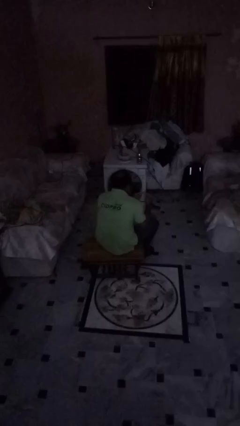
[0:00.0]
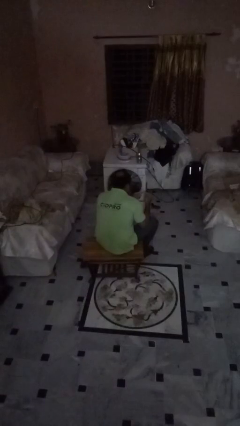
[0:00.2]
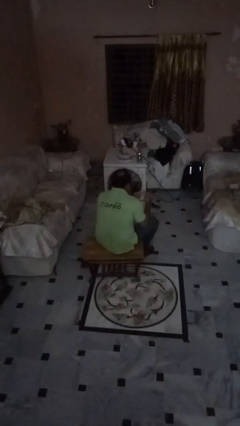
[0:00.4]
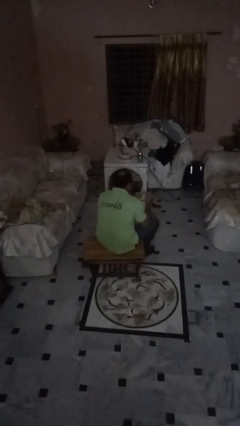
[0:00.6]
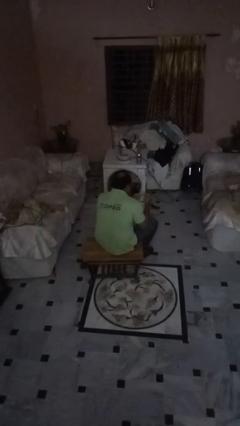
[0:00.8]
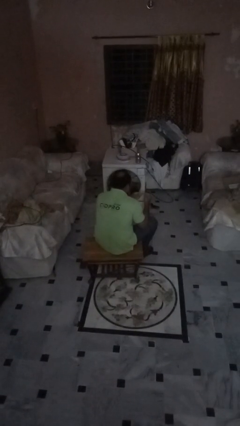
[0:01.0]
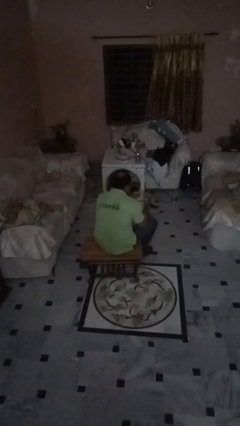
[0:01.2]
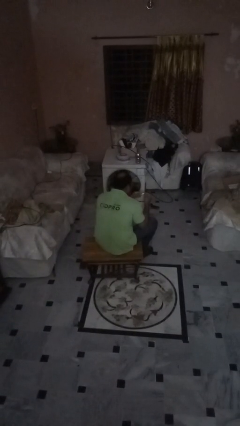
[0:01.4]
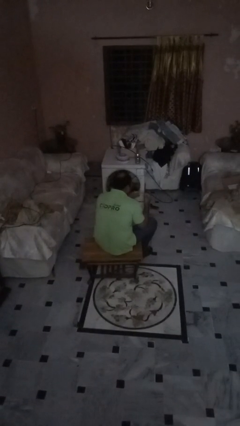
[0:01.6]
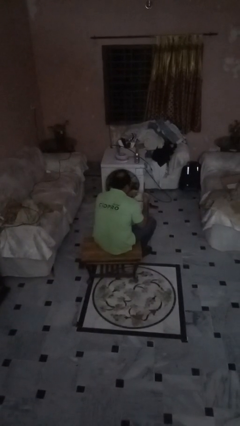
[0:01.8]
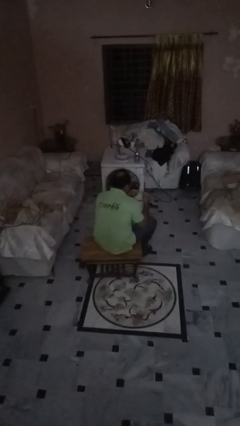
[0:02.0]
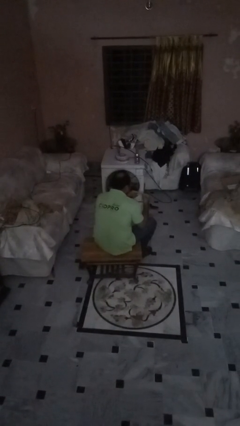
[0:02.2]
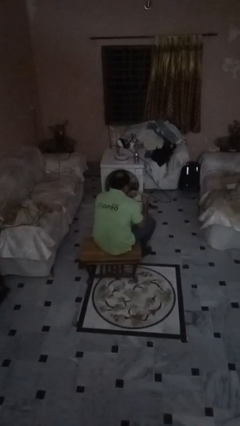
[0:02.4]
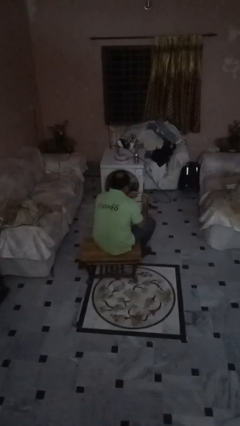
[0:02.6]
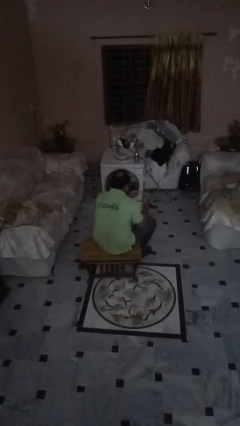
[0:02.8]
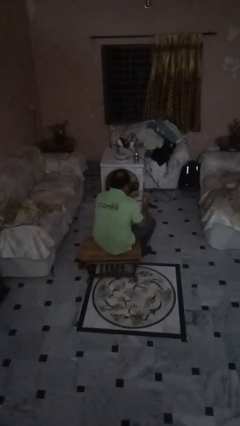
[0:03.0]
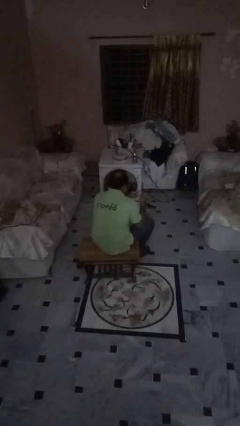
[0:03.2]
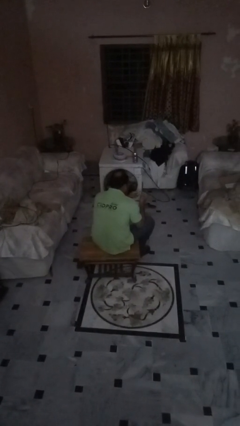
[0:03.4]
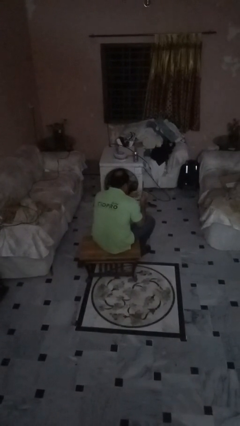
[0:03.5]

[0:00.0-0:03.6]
person files fingernails

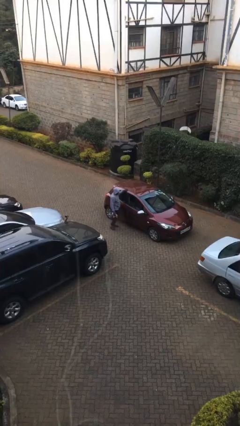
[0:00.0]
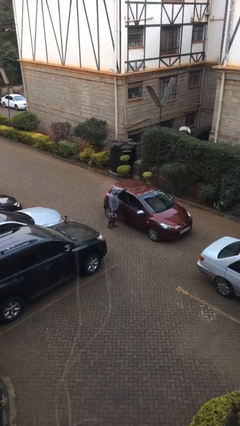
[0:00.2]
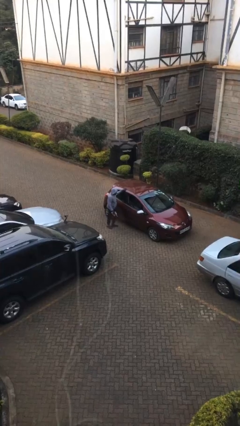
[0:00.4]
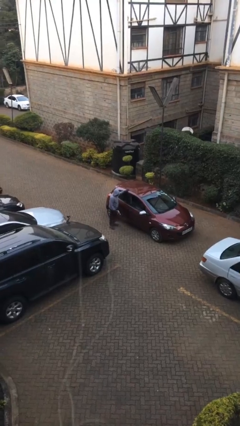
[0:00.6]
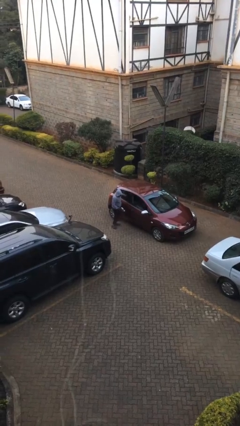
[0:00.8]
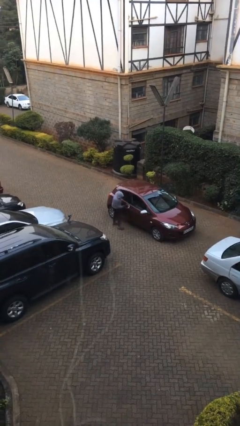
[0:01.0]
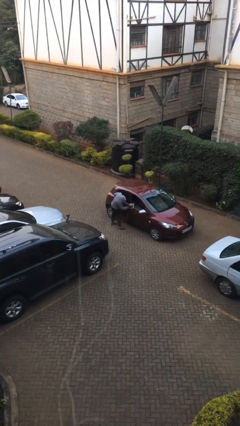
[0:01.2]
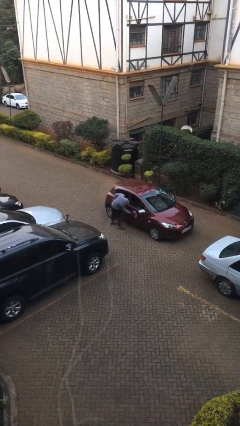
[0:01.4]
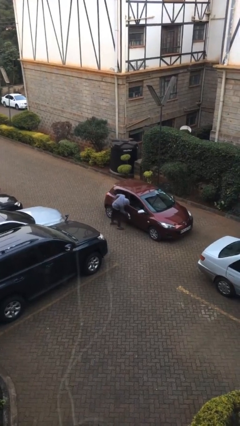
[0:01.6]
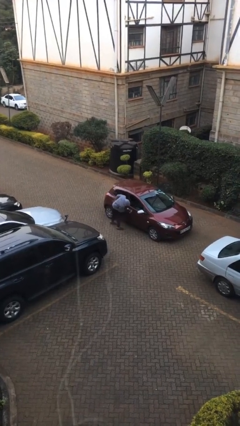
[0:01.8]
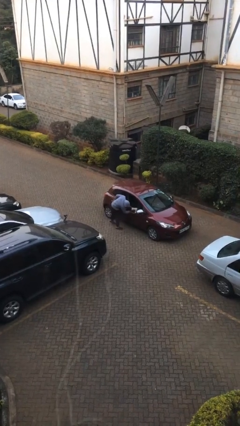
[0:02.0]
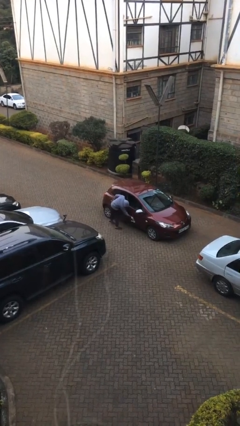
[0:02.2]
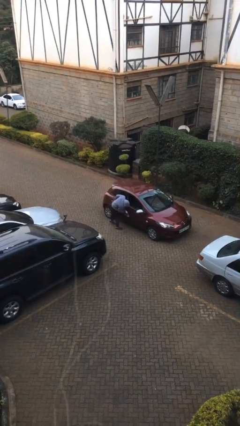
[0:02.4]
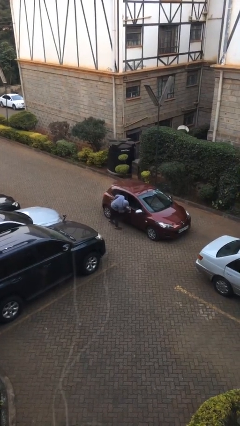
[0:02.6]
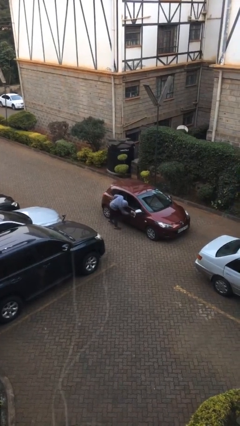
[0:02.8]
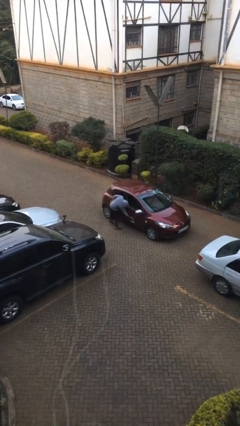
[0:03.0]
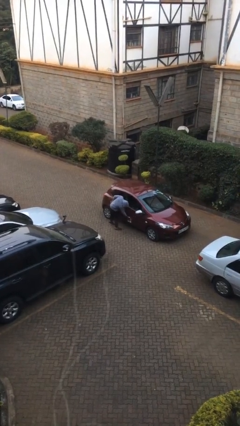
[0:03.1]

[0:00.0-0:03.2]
person polishes car with rag

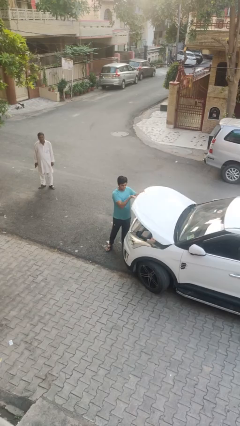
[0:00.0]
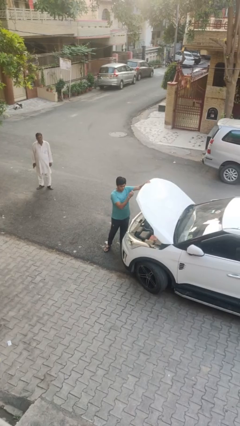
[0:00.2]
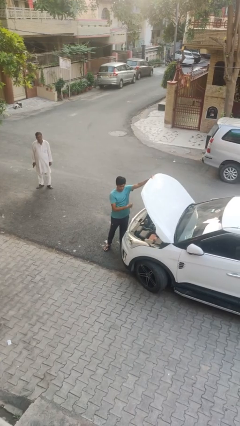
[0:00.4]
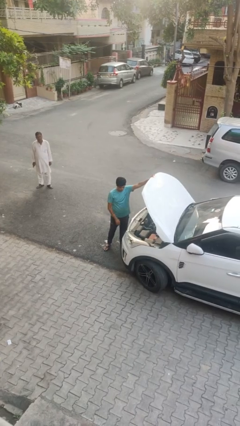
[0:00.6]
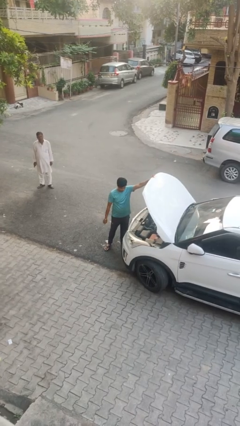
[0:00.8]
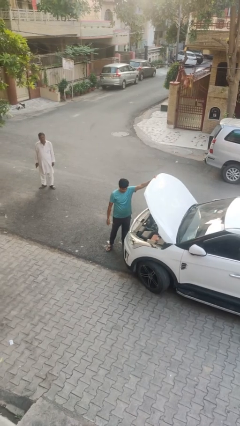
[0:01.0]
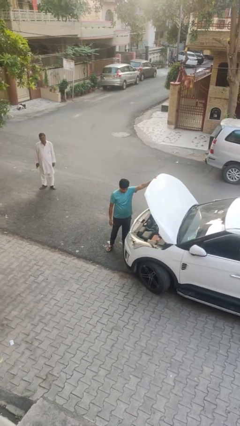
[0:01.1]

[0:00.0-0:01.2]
person opens car hood

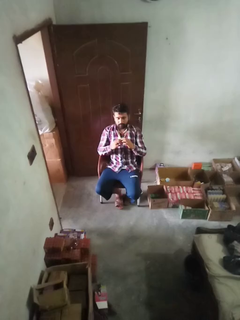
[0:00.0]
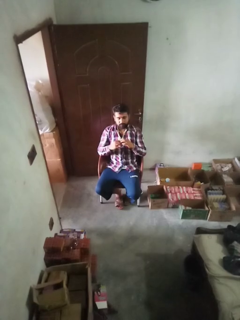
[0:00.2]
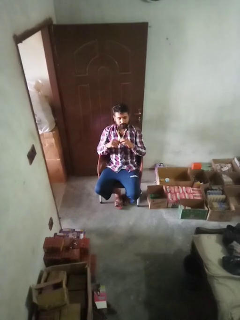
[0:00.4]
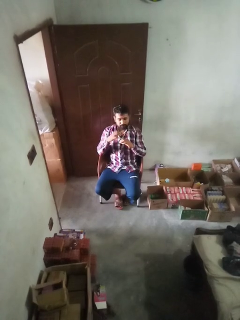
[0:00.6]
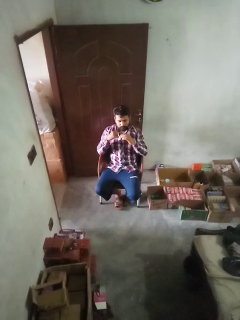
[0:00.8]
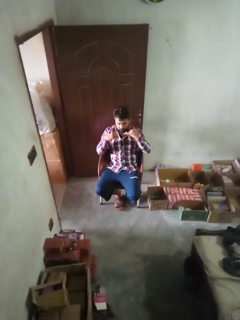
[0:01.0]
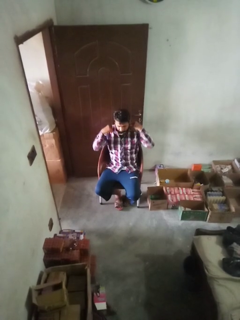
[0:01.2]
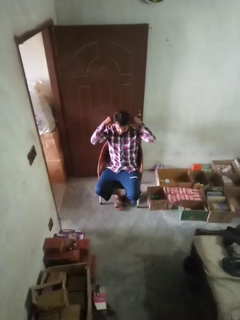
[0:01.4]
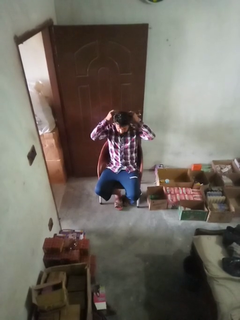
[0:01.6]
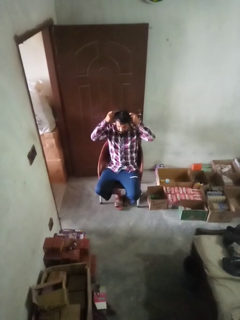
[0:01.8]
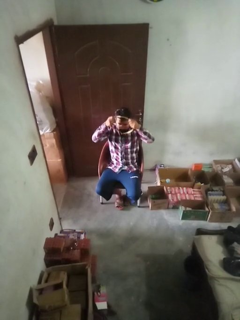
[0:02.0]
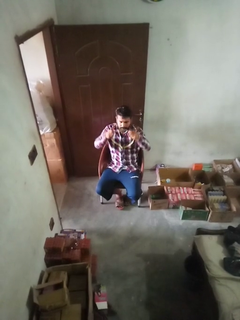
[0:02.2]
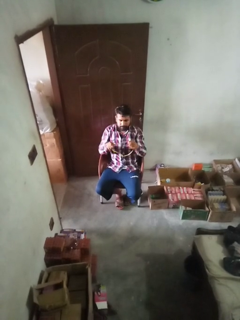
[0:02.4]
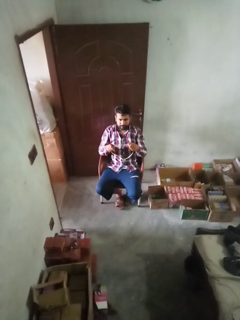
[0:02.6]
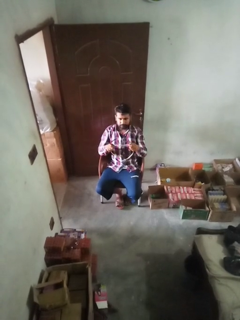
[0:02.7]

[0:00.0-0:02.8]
person takes off necklace

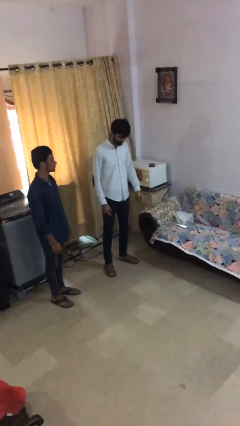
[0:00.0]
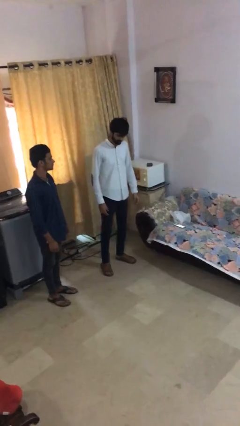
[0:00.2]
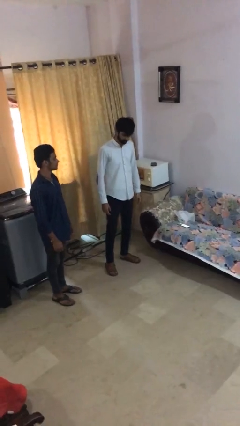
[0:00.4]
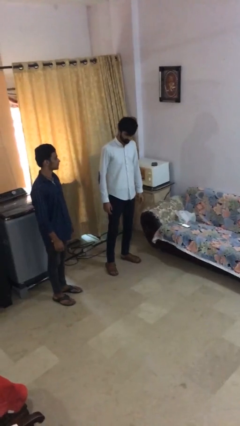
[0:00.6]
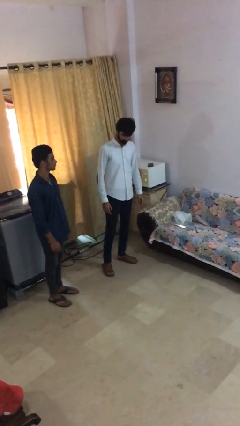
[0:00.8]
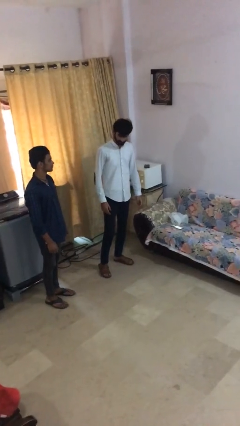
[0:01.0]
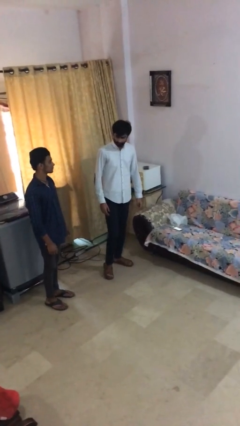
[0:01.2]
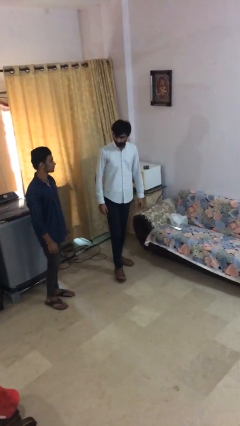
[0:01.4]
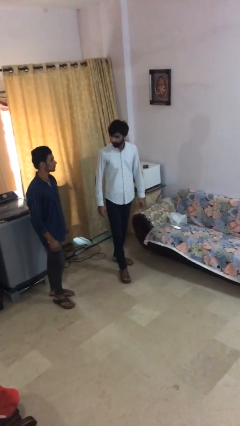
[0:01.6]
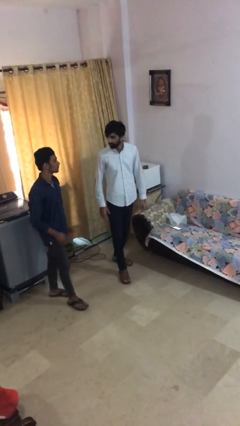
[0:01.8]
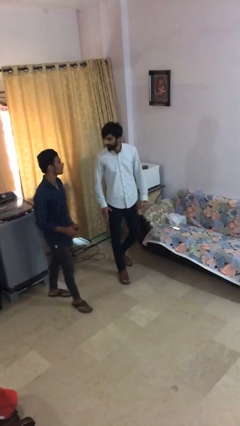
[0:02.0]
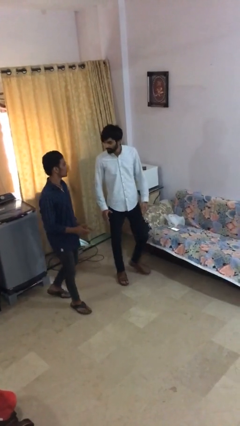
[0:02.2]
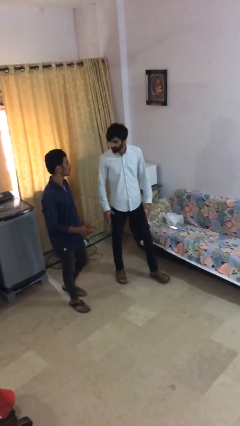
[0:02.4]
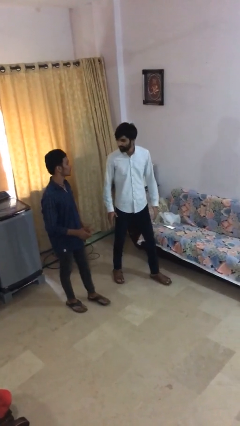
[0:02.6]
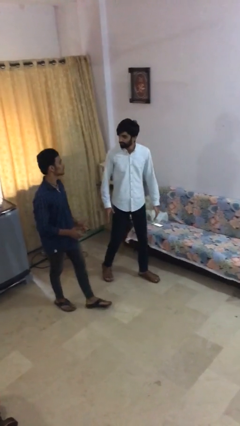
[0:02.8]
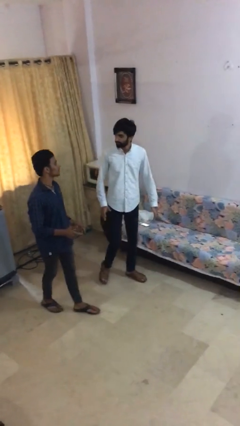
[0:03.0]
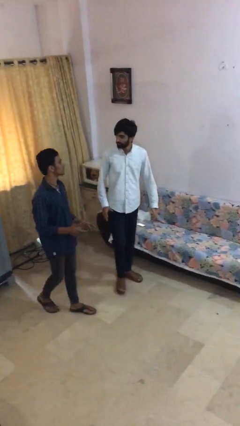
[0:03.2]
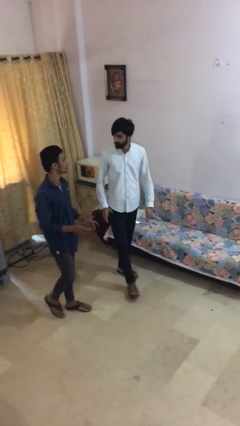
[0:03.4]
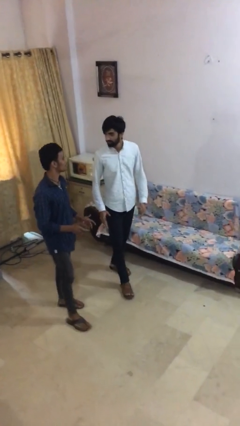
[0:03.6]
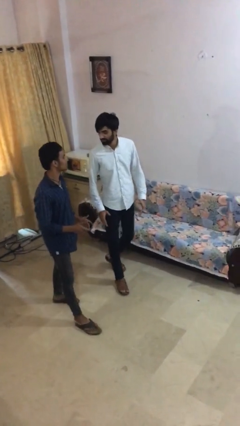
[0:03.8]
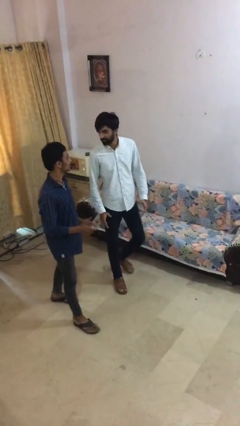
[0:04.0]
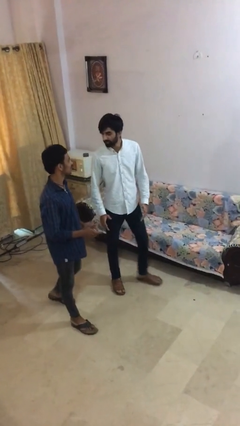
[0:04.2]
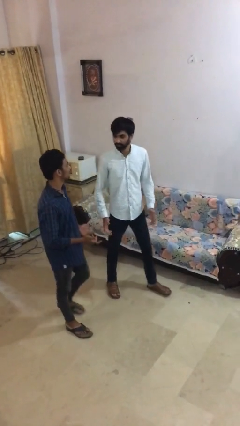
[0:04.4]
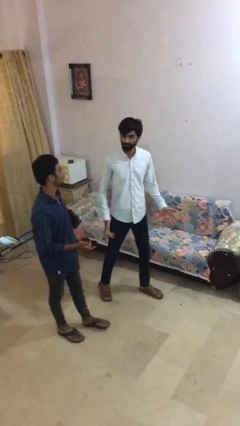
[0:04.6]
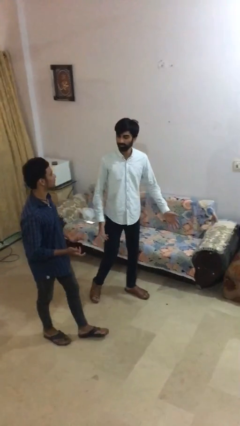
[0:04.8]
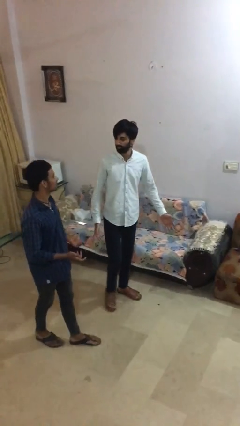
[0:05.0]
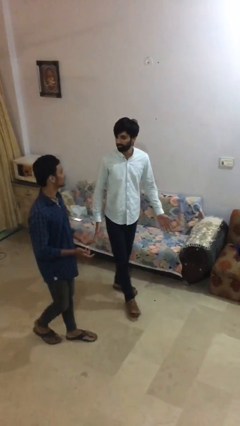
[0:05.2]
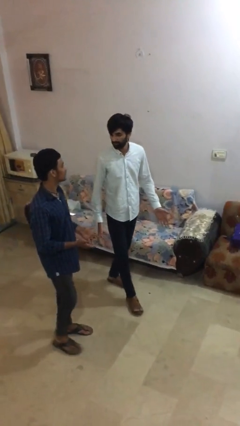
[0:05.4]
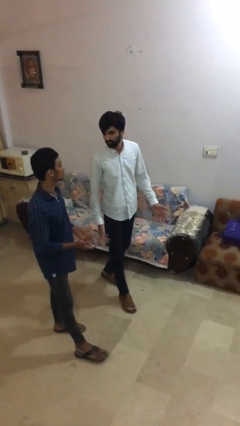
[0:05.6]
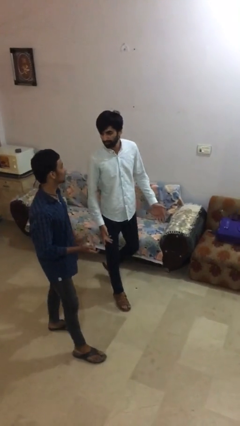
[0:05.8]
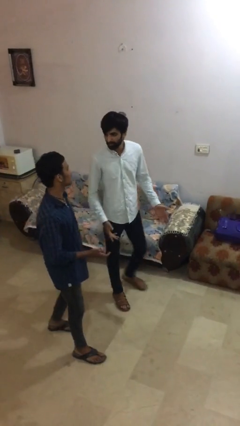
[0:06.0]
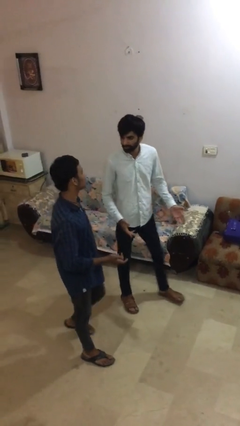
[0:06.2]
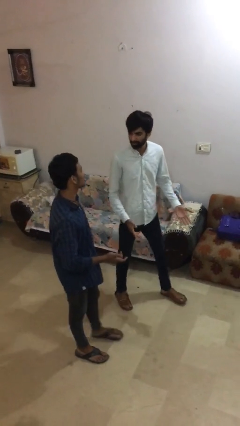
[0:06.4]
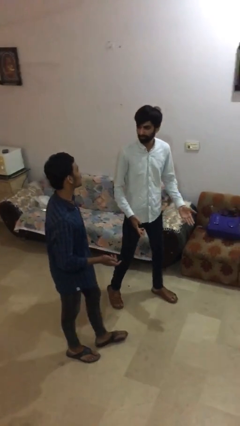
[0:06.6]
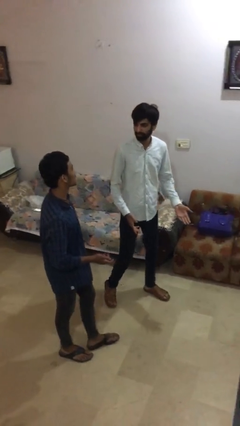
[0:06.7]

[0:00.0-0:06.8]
person talks to person

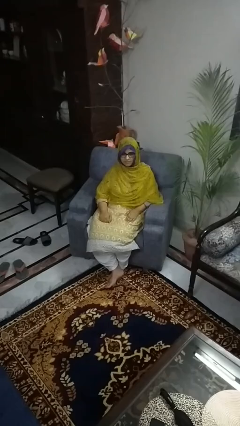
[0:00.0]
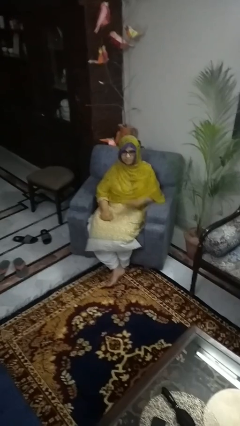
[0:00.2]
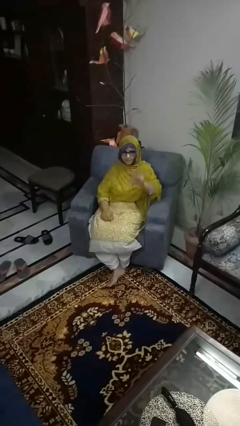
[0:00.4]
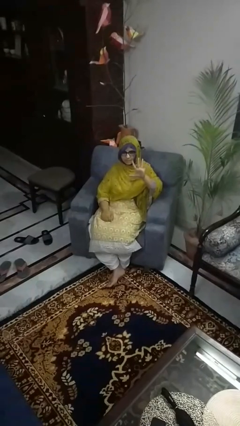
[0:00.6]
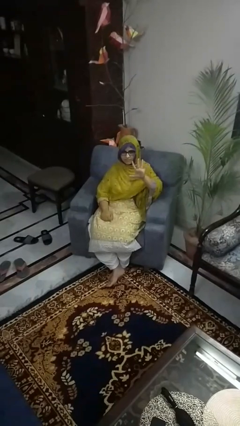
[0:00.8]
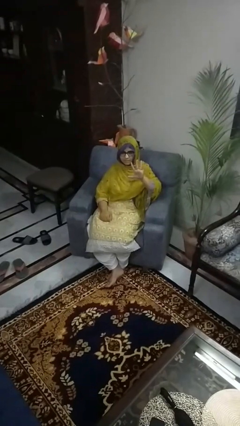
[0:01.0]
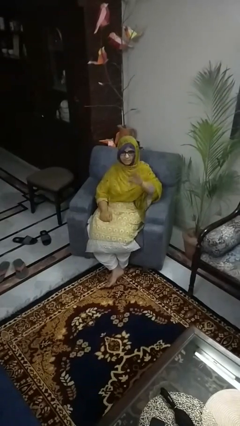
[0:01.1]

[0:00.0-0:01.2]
person gestures number five
